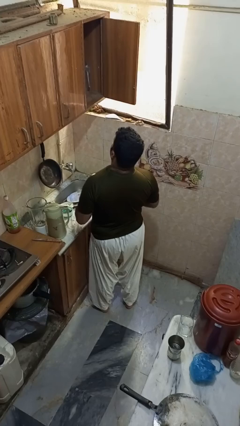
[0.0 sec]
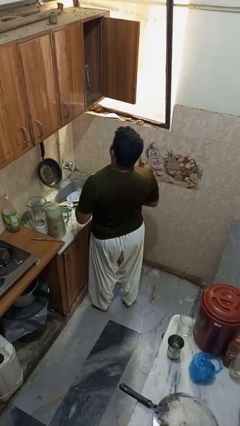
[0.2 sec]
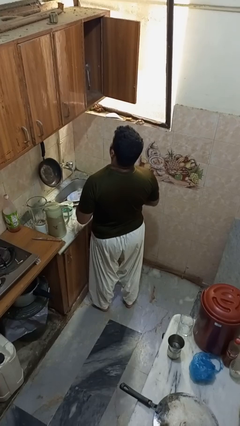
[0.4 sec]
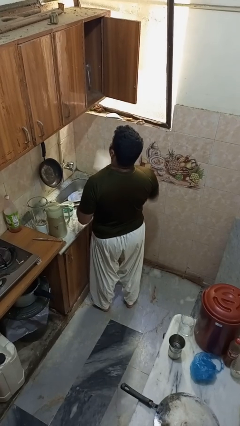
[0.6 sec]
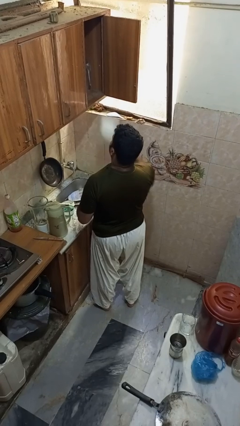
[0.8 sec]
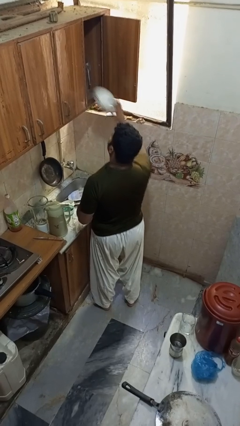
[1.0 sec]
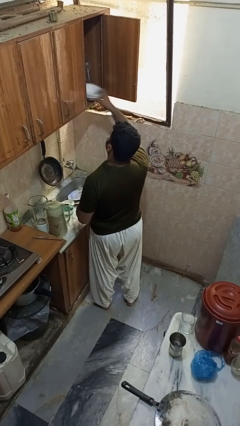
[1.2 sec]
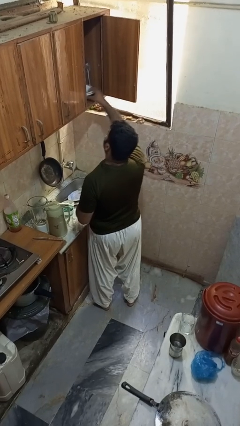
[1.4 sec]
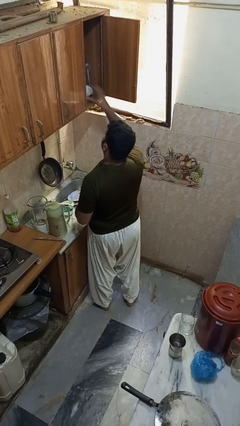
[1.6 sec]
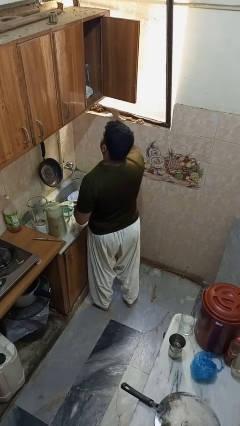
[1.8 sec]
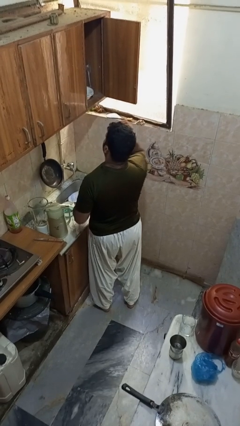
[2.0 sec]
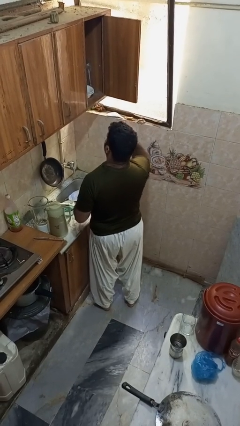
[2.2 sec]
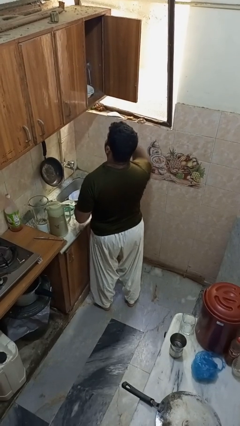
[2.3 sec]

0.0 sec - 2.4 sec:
person puts object in cabinet

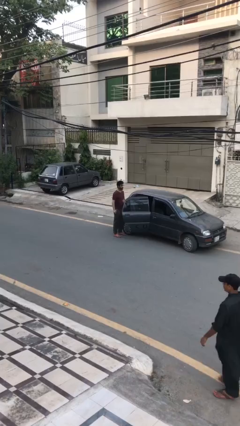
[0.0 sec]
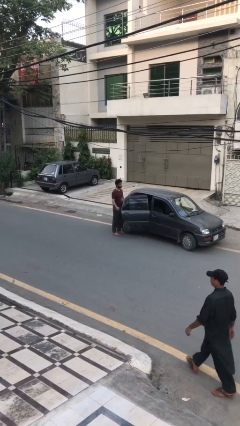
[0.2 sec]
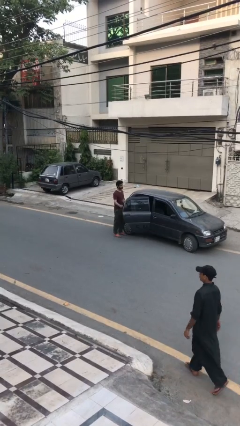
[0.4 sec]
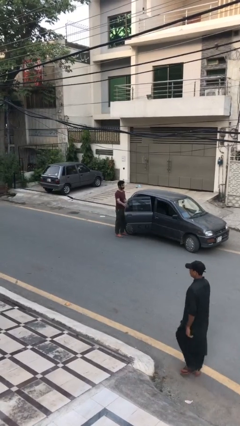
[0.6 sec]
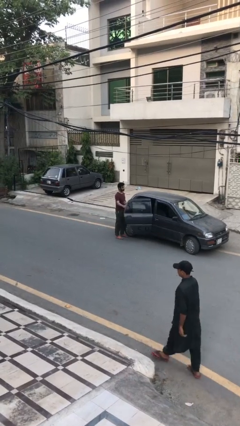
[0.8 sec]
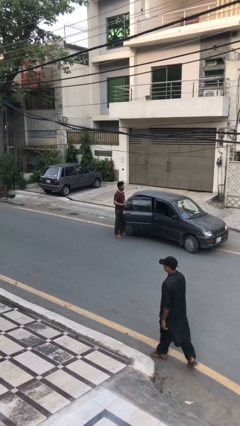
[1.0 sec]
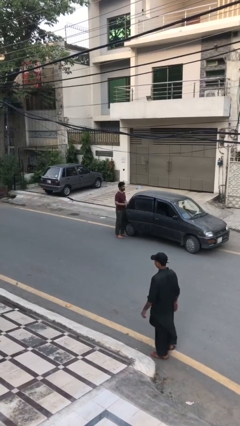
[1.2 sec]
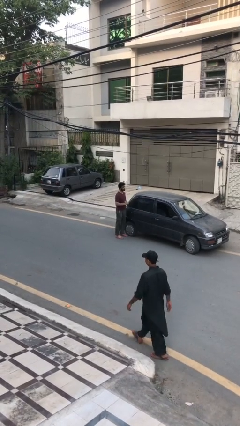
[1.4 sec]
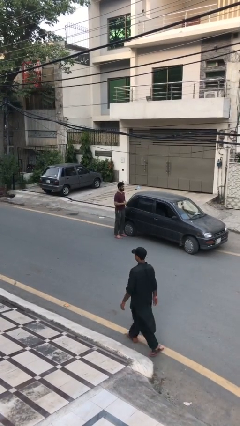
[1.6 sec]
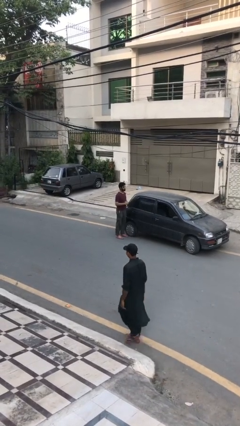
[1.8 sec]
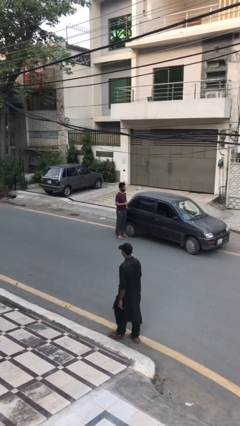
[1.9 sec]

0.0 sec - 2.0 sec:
person closes car door

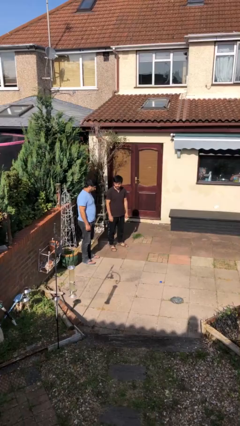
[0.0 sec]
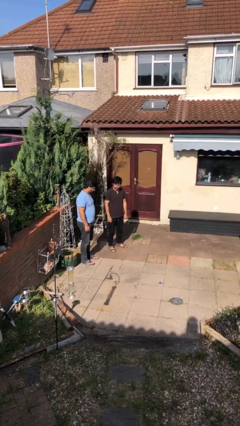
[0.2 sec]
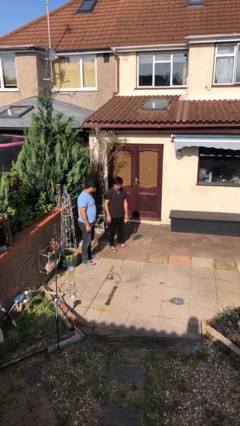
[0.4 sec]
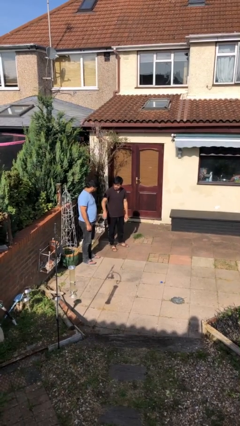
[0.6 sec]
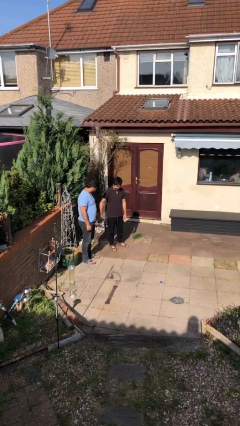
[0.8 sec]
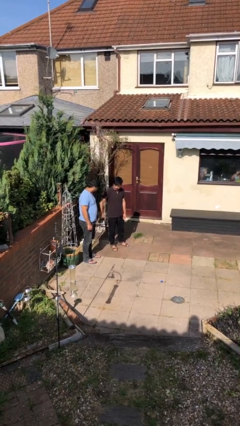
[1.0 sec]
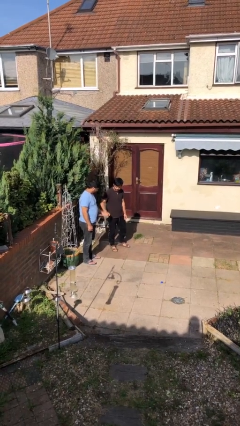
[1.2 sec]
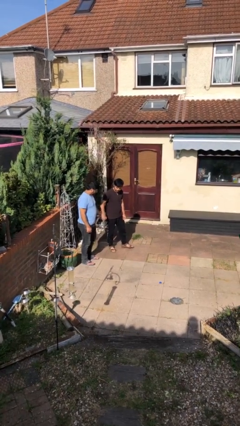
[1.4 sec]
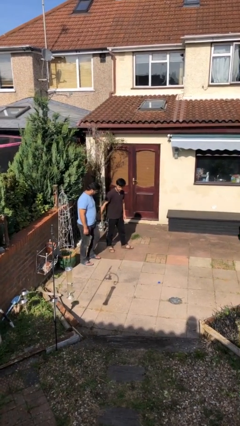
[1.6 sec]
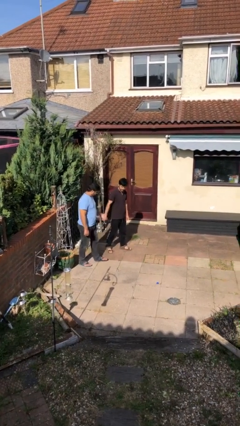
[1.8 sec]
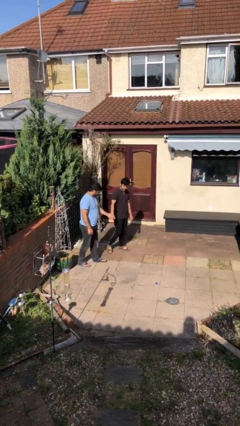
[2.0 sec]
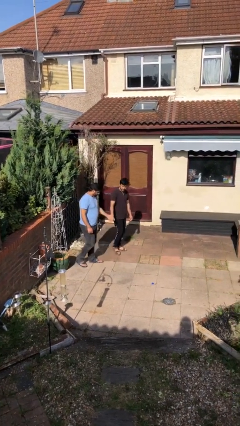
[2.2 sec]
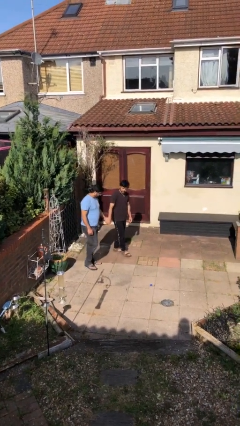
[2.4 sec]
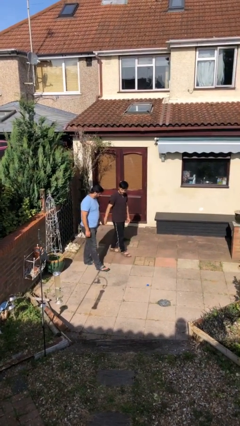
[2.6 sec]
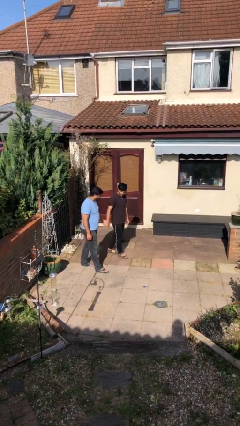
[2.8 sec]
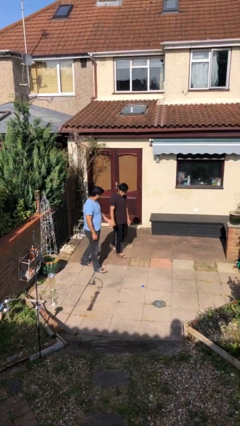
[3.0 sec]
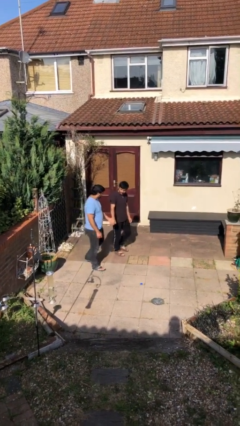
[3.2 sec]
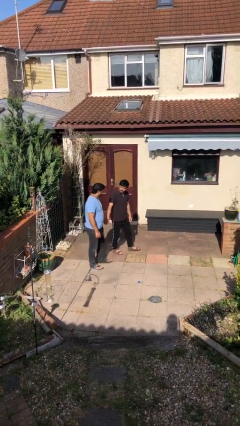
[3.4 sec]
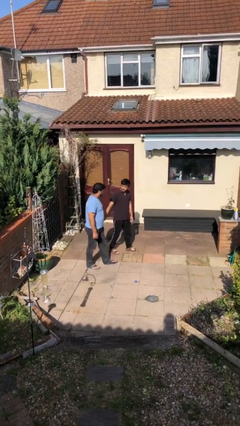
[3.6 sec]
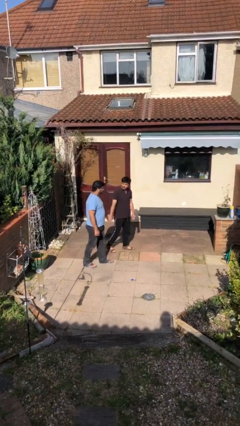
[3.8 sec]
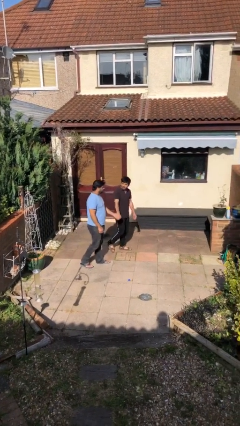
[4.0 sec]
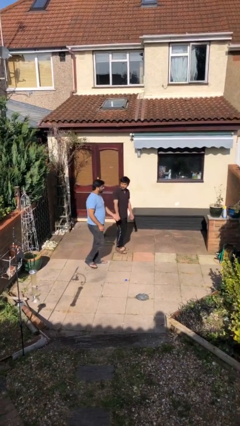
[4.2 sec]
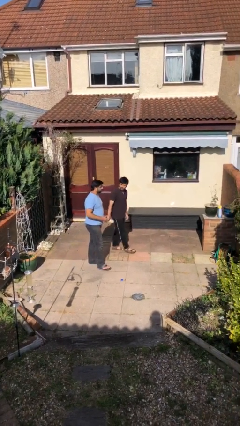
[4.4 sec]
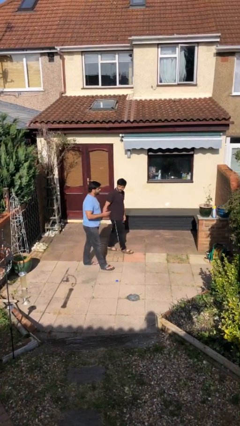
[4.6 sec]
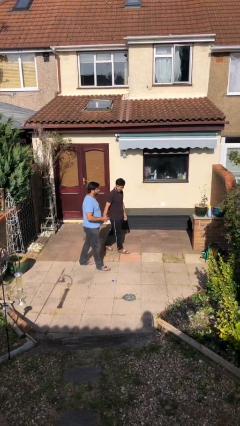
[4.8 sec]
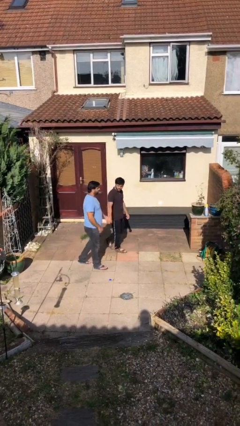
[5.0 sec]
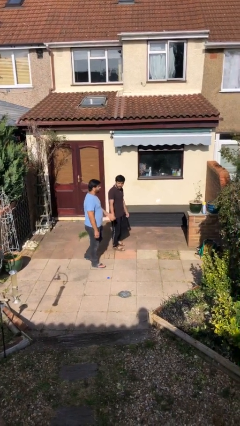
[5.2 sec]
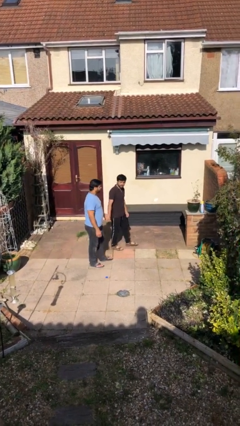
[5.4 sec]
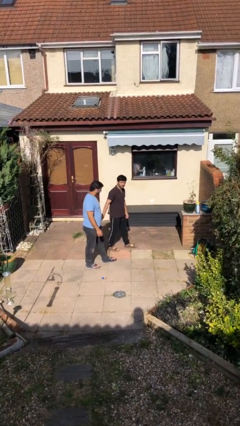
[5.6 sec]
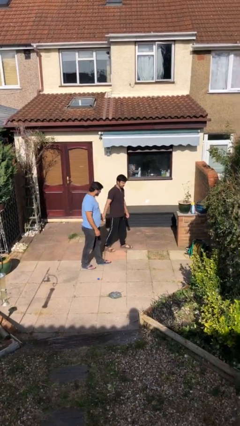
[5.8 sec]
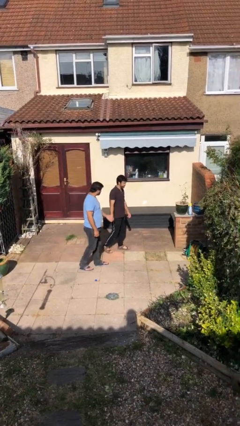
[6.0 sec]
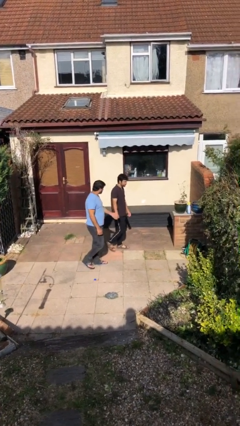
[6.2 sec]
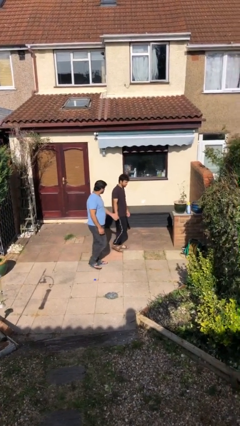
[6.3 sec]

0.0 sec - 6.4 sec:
person holds hand

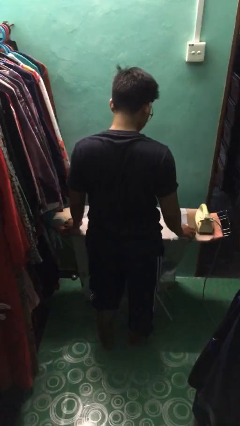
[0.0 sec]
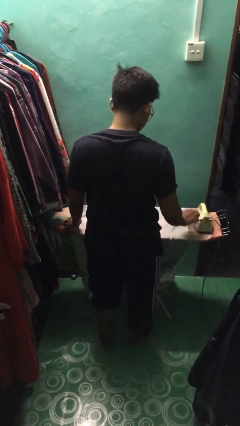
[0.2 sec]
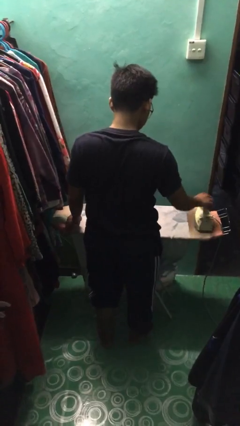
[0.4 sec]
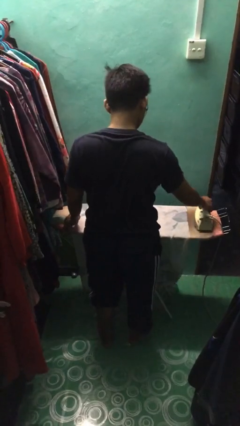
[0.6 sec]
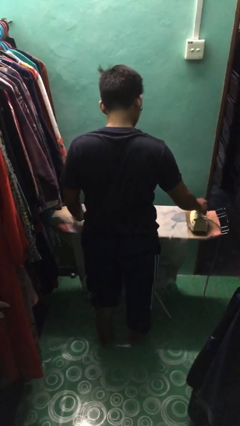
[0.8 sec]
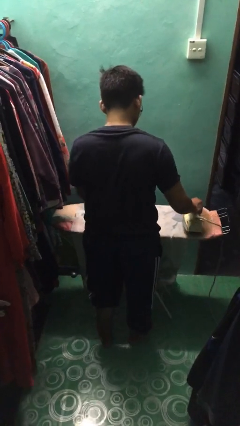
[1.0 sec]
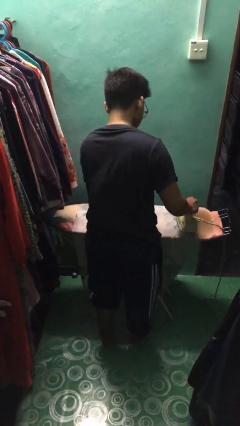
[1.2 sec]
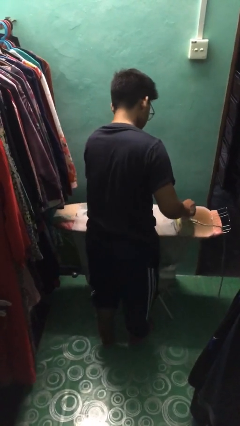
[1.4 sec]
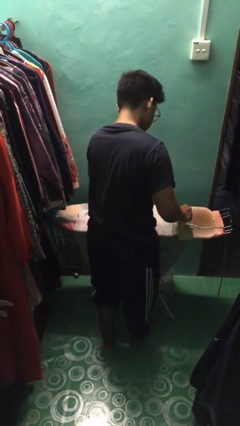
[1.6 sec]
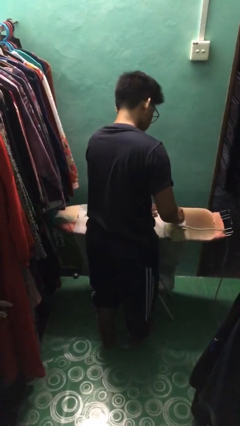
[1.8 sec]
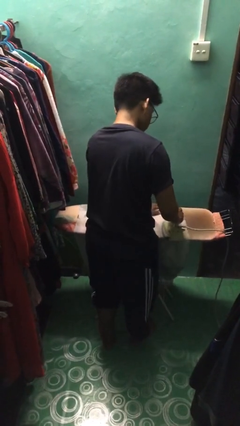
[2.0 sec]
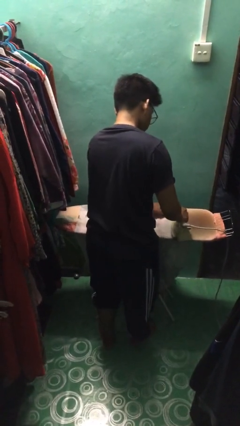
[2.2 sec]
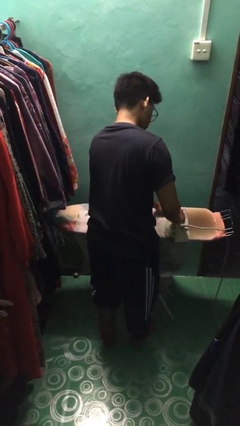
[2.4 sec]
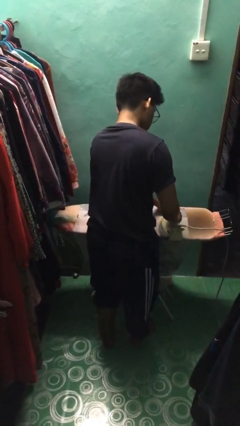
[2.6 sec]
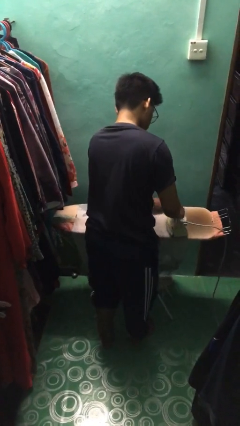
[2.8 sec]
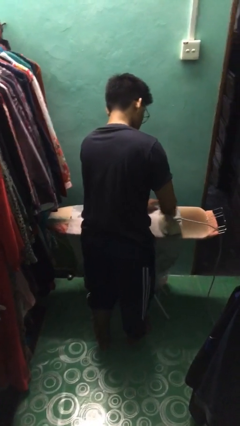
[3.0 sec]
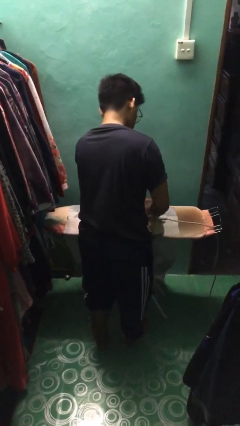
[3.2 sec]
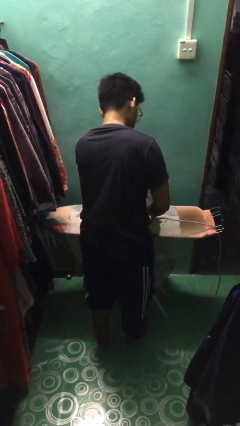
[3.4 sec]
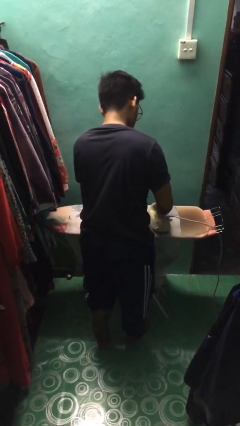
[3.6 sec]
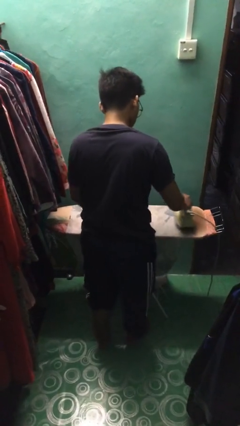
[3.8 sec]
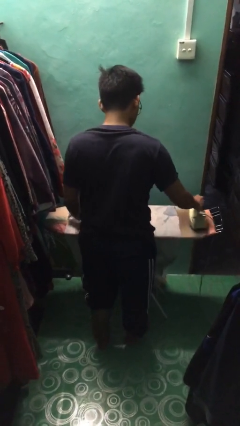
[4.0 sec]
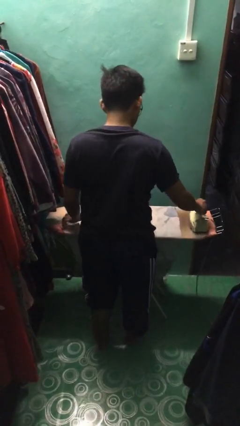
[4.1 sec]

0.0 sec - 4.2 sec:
person irons clothes

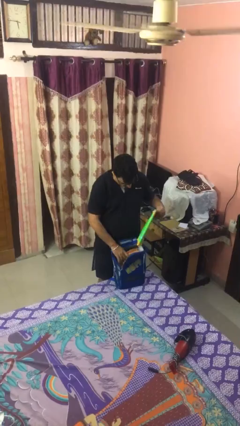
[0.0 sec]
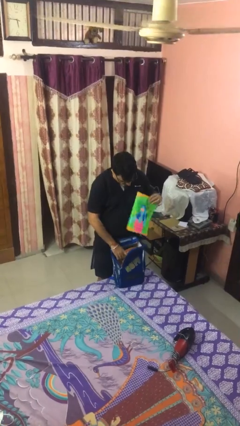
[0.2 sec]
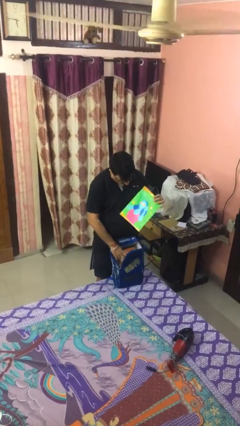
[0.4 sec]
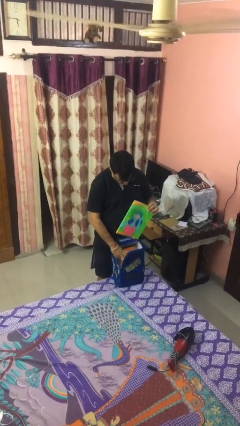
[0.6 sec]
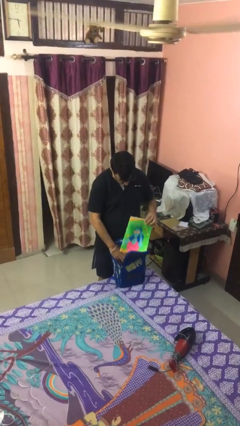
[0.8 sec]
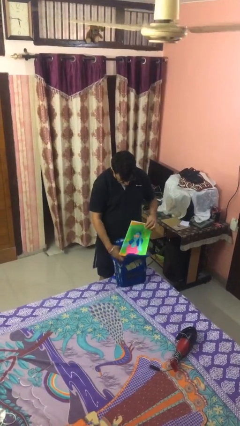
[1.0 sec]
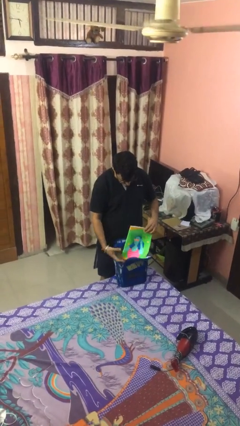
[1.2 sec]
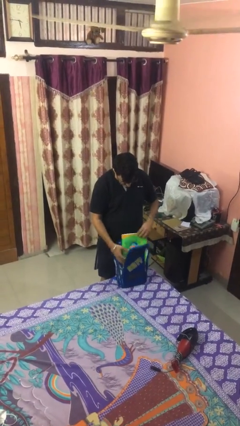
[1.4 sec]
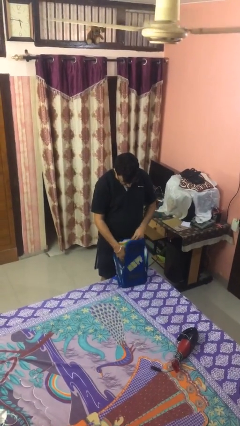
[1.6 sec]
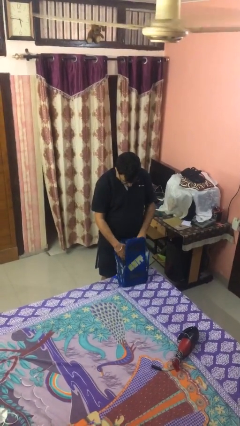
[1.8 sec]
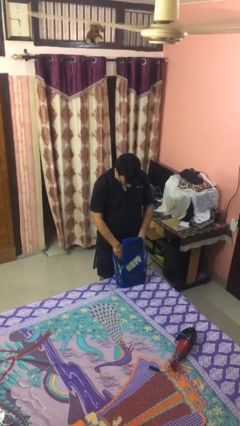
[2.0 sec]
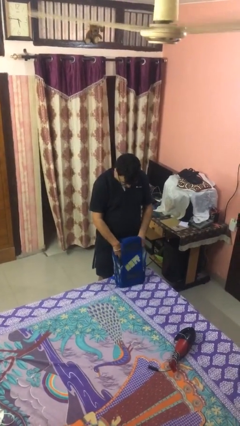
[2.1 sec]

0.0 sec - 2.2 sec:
person puts object into backpack

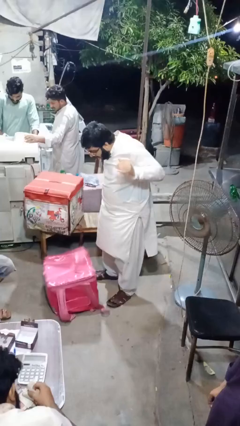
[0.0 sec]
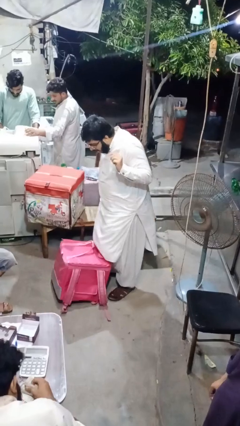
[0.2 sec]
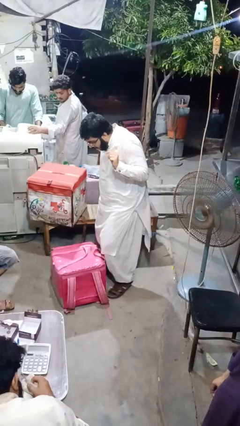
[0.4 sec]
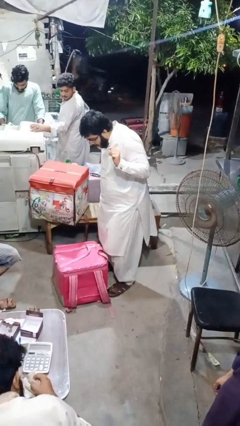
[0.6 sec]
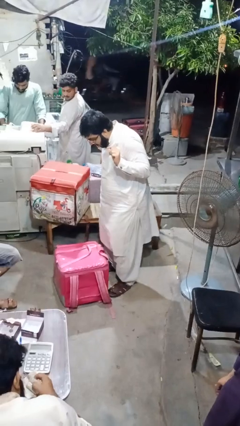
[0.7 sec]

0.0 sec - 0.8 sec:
person drops object
